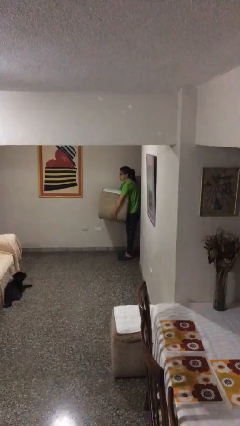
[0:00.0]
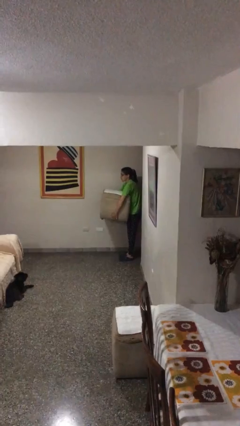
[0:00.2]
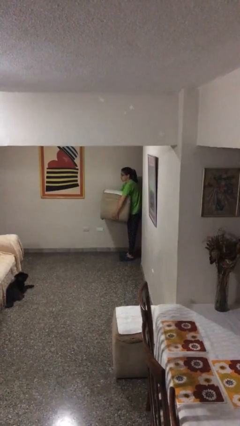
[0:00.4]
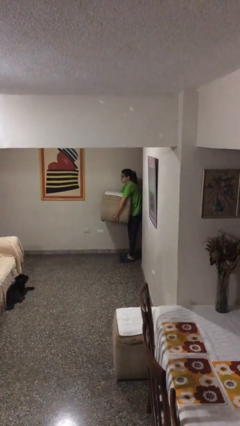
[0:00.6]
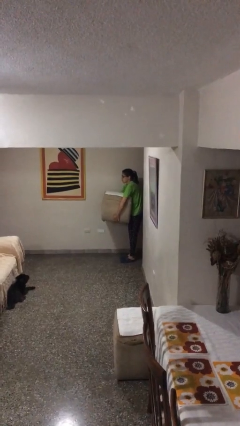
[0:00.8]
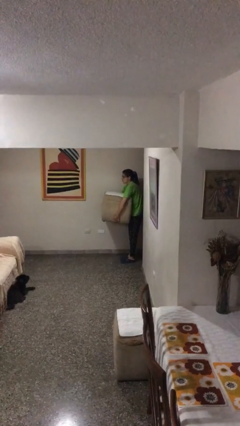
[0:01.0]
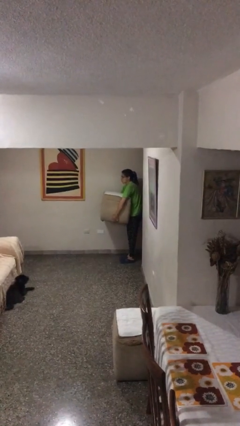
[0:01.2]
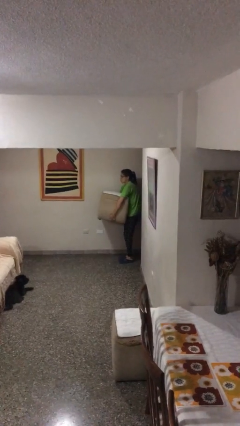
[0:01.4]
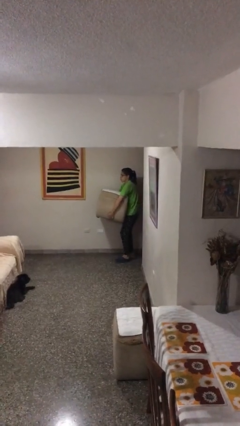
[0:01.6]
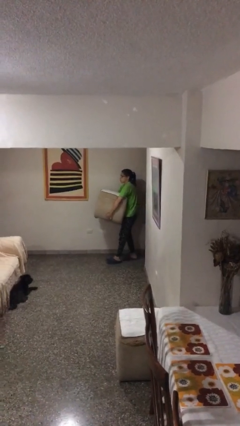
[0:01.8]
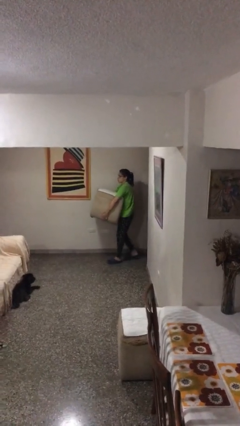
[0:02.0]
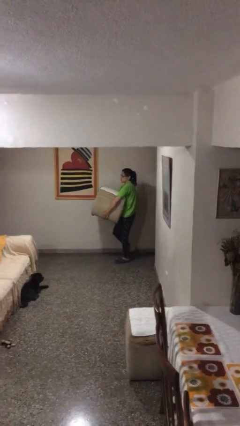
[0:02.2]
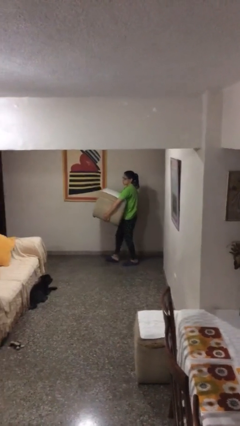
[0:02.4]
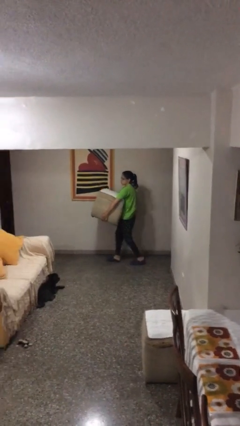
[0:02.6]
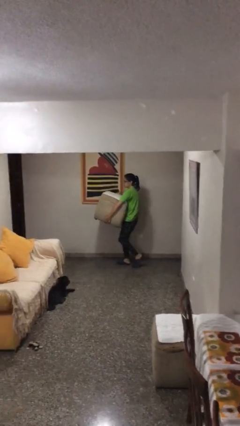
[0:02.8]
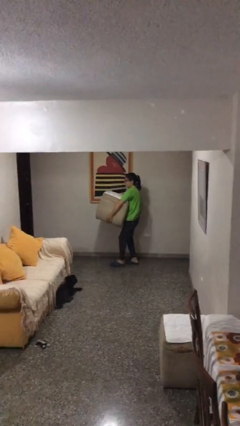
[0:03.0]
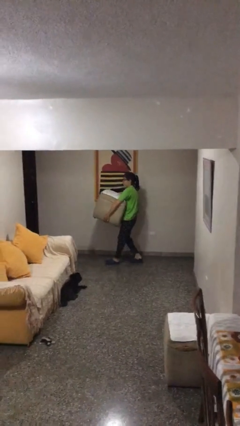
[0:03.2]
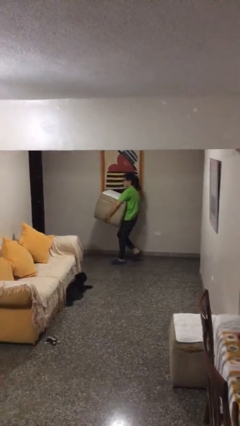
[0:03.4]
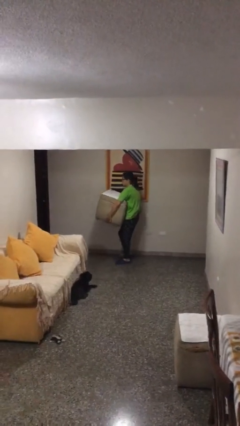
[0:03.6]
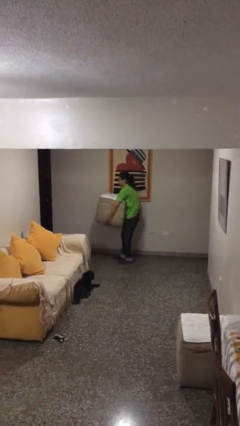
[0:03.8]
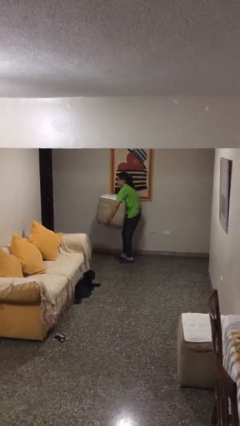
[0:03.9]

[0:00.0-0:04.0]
person carries heavy object

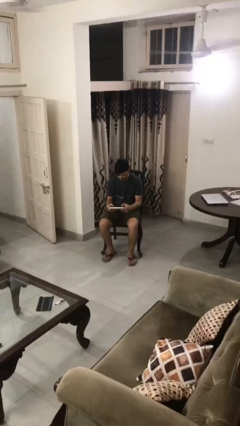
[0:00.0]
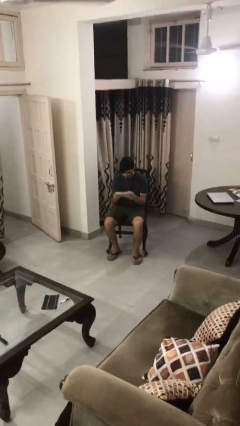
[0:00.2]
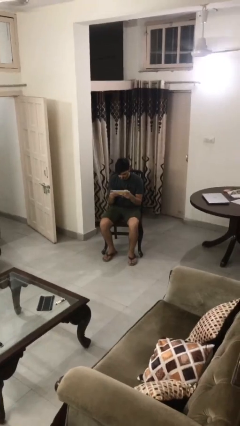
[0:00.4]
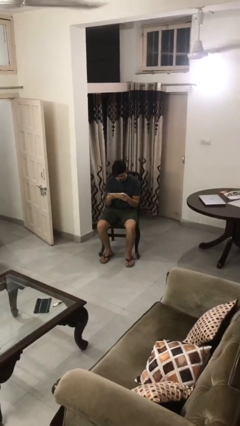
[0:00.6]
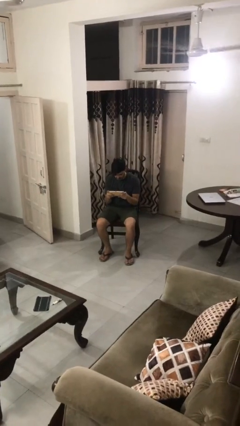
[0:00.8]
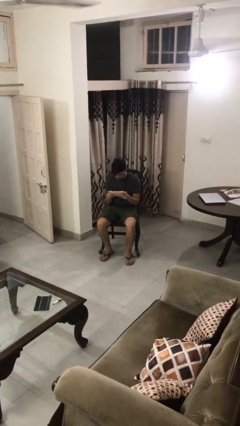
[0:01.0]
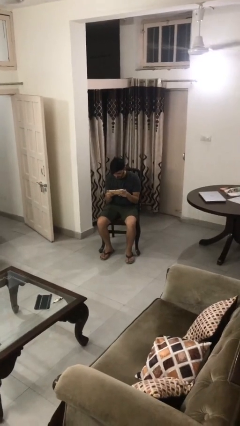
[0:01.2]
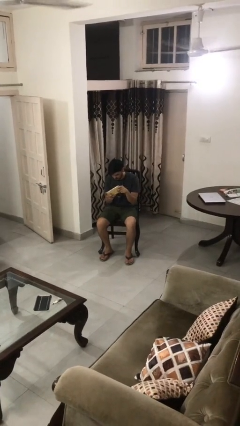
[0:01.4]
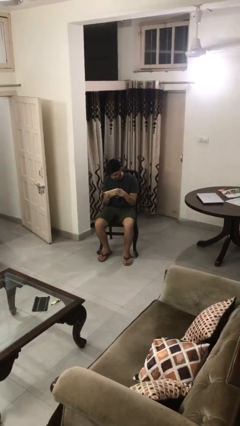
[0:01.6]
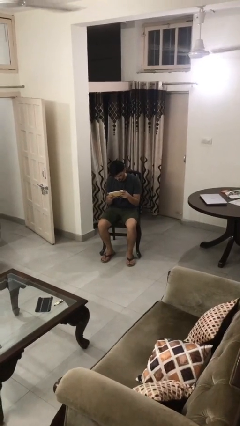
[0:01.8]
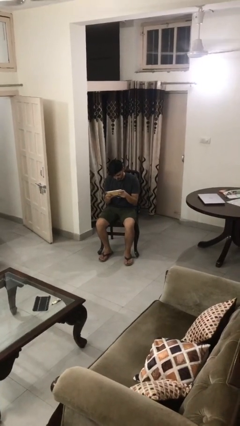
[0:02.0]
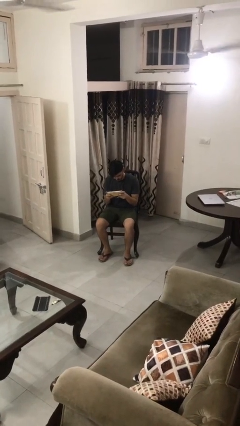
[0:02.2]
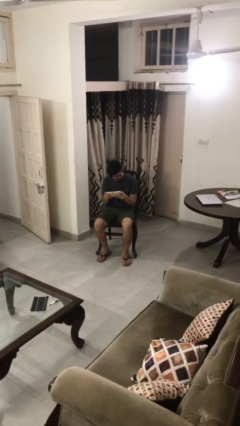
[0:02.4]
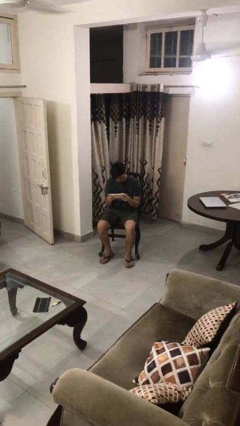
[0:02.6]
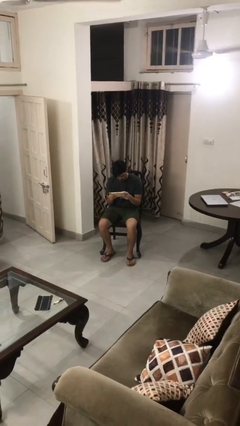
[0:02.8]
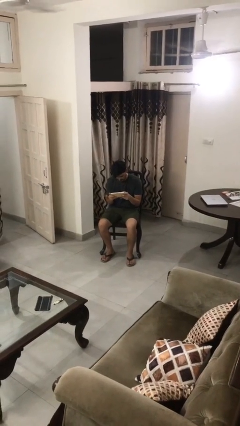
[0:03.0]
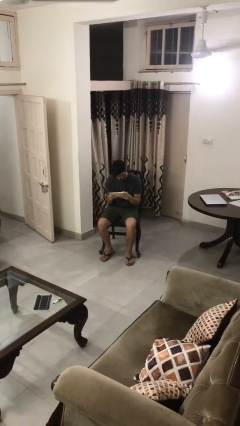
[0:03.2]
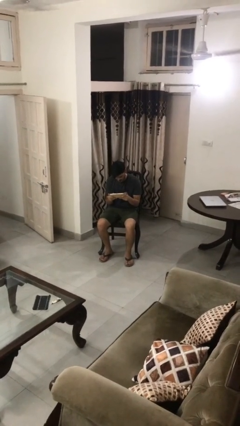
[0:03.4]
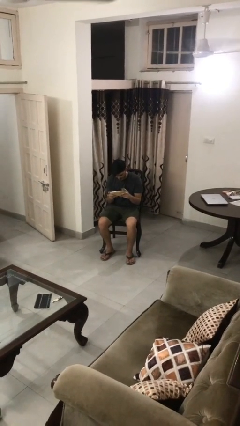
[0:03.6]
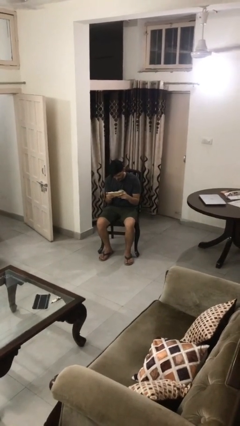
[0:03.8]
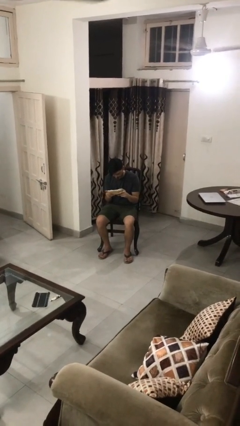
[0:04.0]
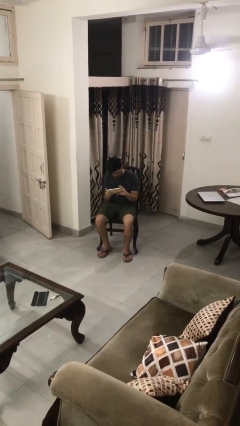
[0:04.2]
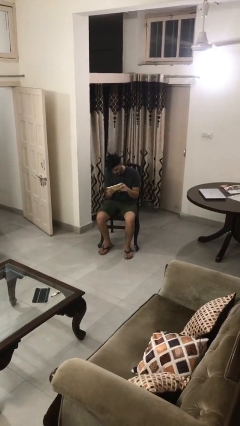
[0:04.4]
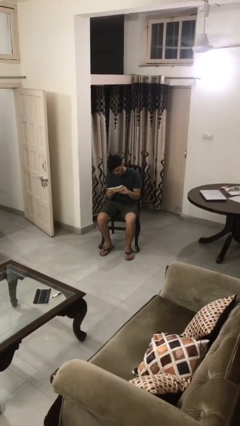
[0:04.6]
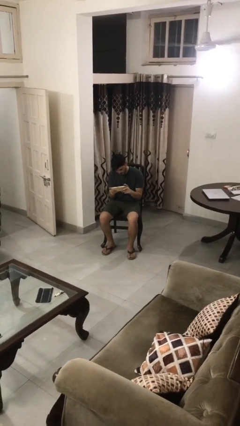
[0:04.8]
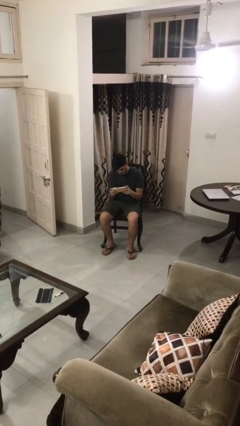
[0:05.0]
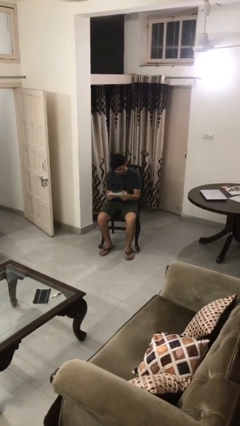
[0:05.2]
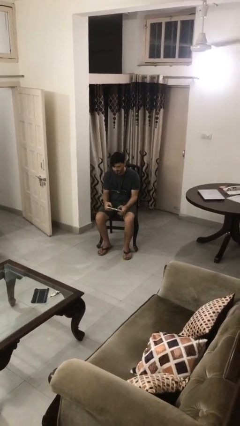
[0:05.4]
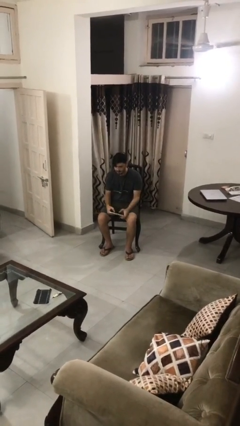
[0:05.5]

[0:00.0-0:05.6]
person interacts with handheld game

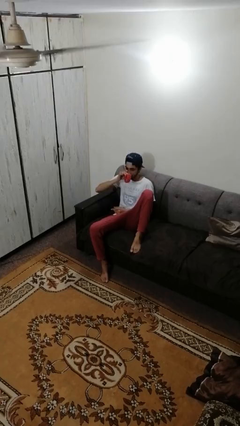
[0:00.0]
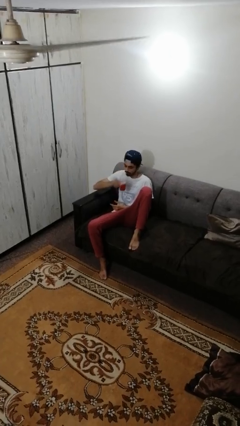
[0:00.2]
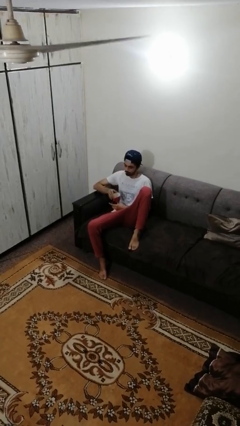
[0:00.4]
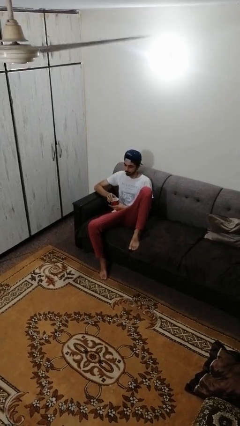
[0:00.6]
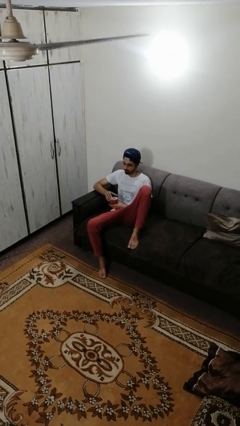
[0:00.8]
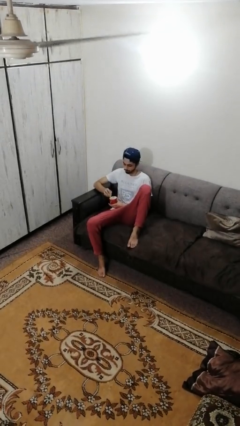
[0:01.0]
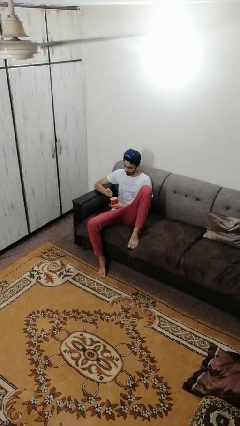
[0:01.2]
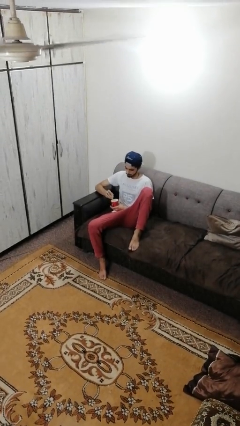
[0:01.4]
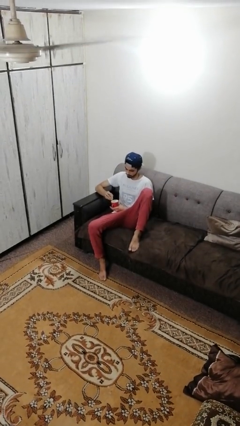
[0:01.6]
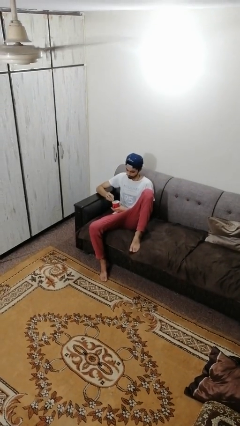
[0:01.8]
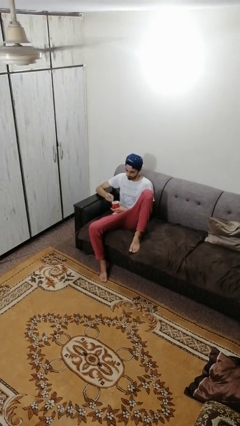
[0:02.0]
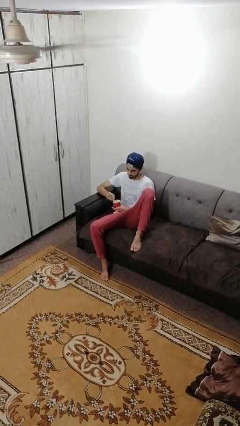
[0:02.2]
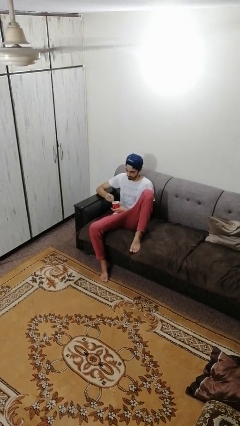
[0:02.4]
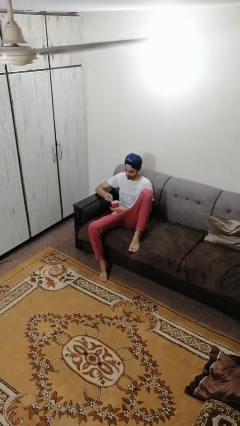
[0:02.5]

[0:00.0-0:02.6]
person stirs mug

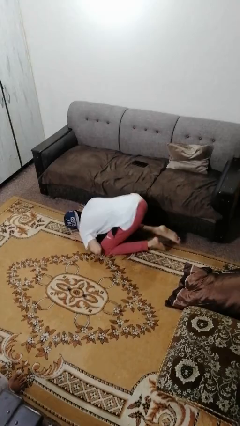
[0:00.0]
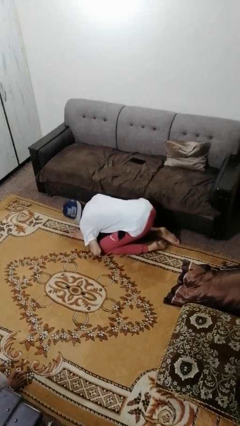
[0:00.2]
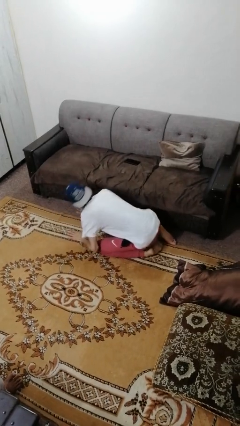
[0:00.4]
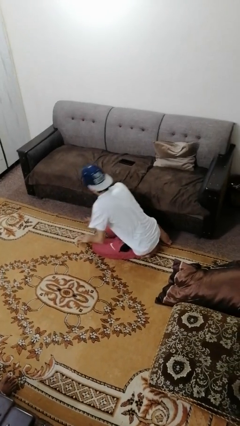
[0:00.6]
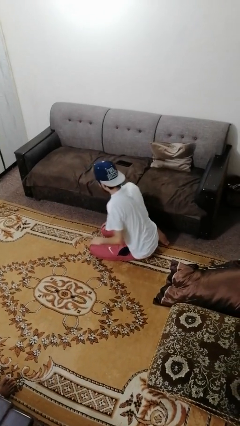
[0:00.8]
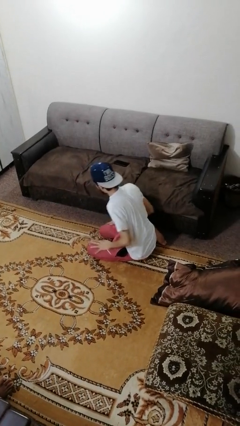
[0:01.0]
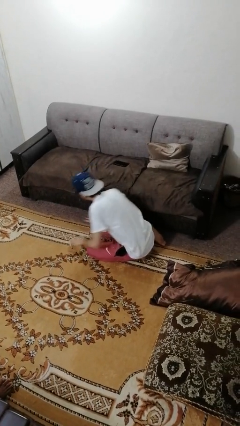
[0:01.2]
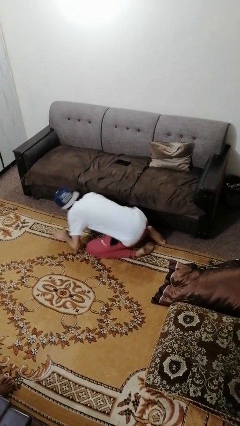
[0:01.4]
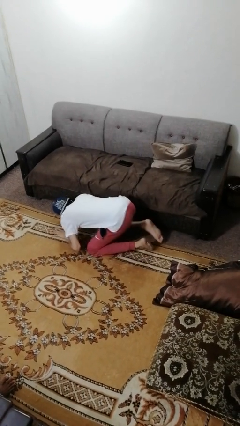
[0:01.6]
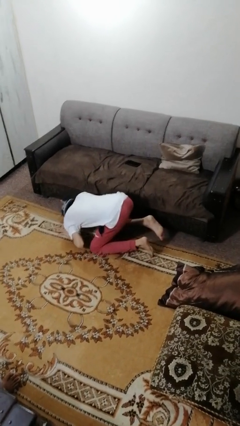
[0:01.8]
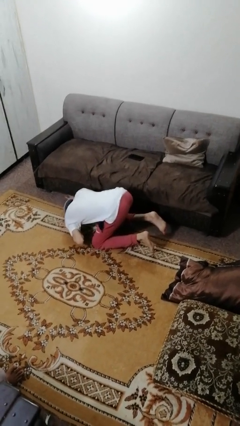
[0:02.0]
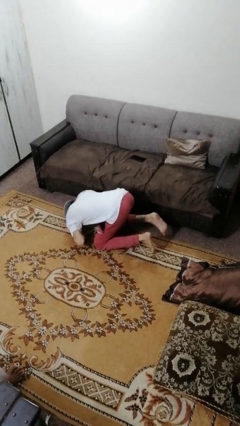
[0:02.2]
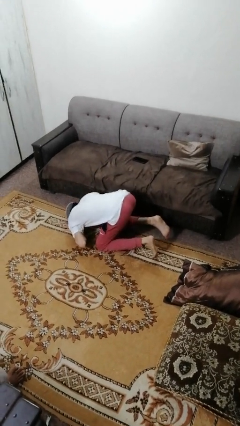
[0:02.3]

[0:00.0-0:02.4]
person searches under couch

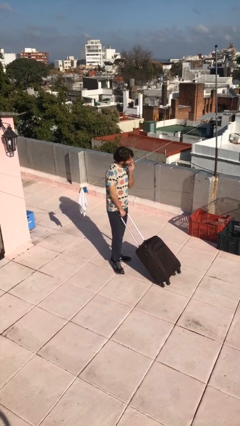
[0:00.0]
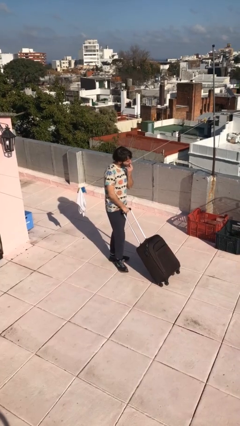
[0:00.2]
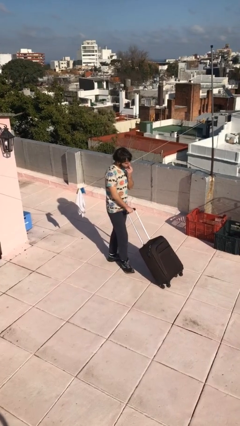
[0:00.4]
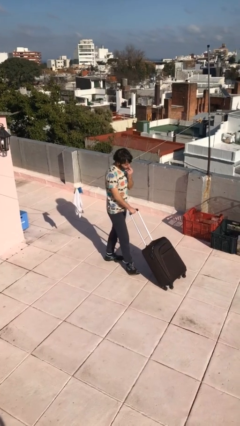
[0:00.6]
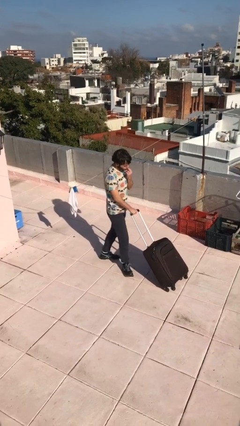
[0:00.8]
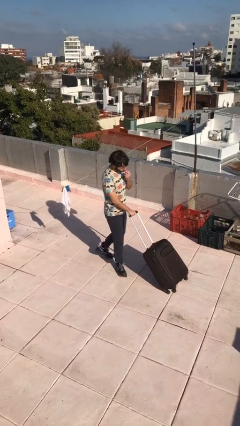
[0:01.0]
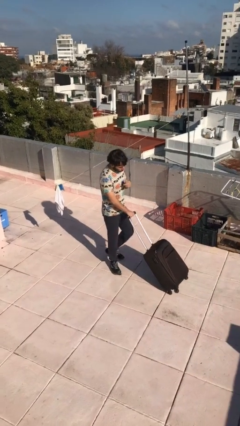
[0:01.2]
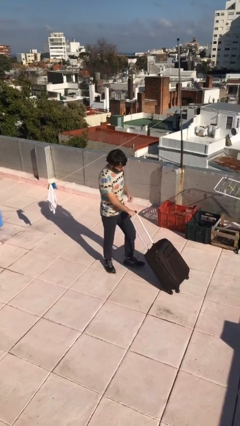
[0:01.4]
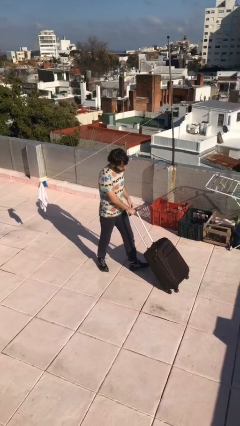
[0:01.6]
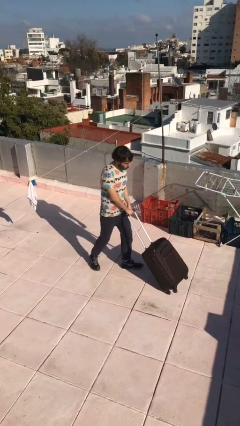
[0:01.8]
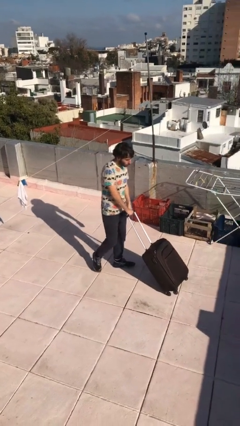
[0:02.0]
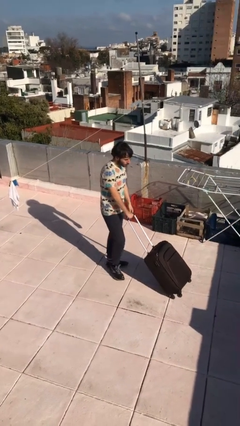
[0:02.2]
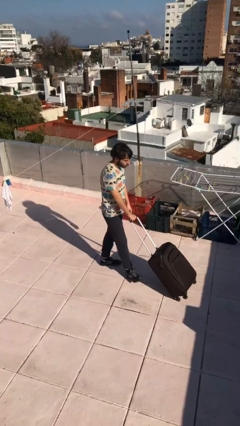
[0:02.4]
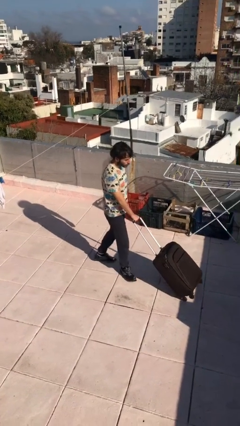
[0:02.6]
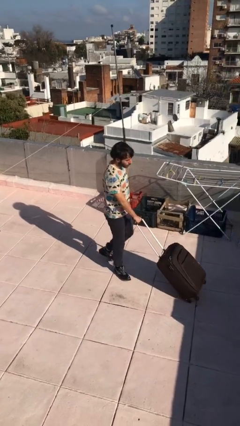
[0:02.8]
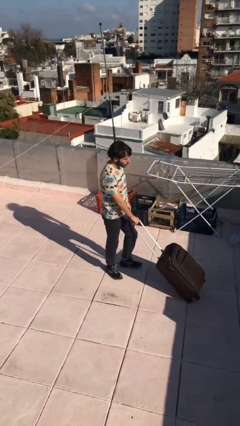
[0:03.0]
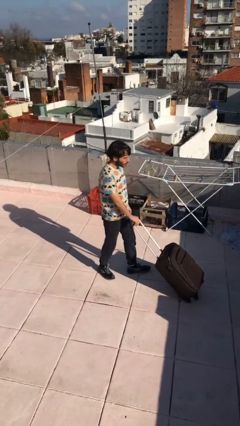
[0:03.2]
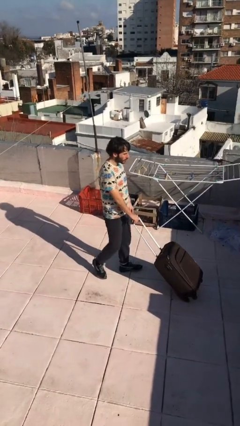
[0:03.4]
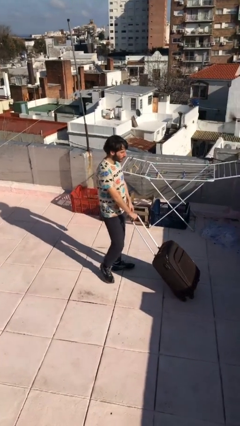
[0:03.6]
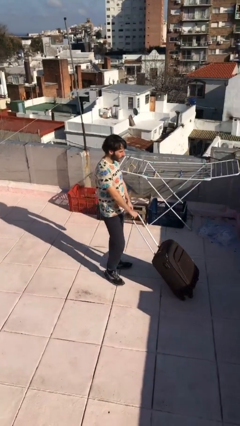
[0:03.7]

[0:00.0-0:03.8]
person pushes wheeled cart
